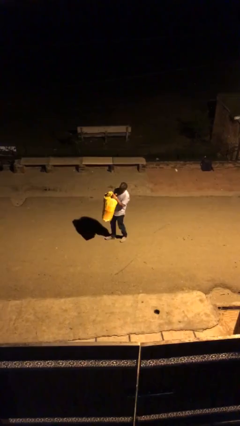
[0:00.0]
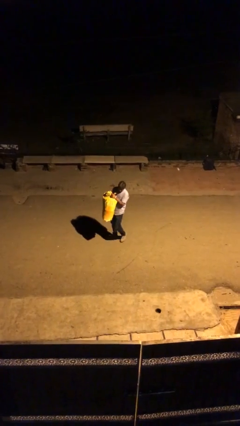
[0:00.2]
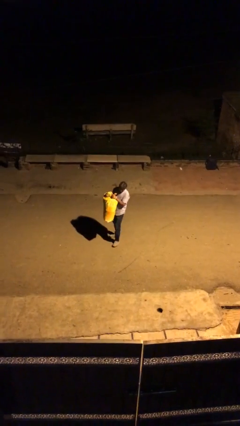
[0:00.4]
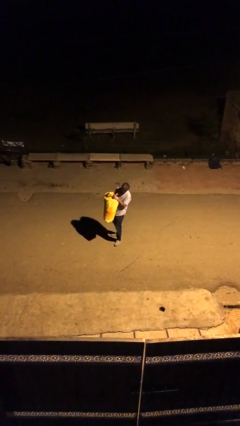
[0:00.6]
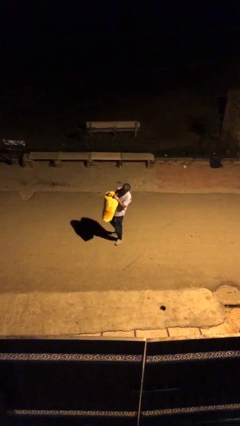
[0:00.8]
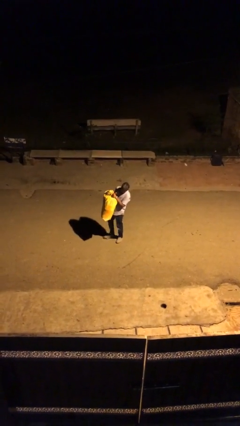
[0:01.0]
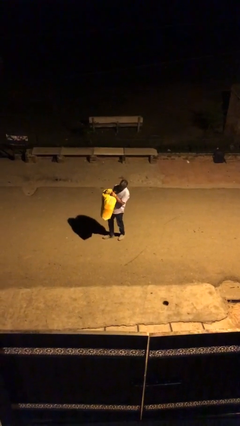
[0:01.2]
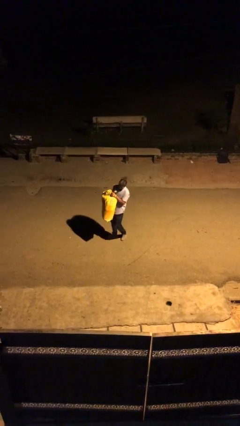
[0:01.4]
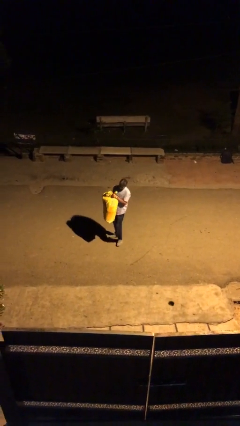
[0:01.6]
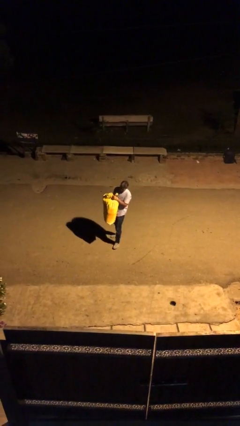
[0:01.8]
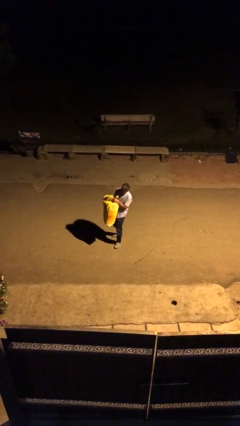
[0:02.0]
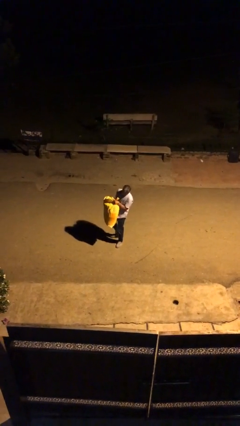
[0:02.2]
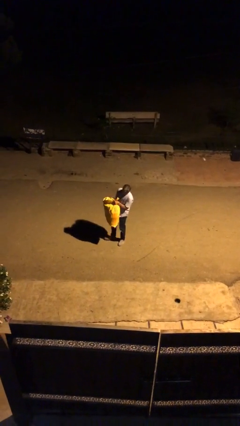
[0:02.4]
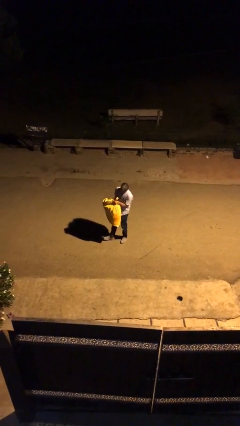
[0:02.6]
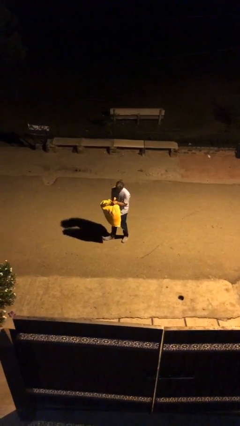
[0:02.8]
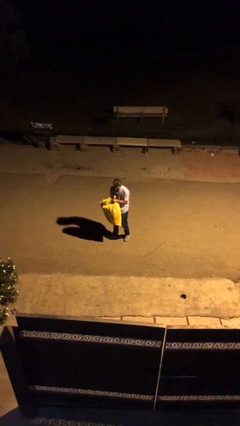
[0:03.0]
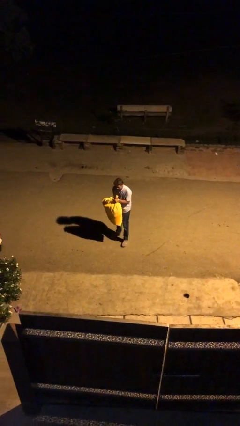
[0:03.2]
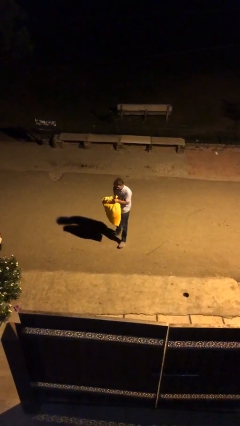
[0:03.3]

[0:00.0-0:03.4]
person carries heavy object

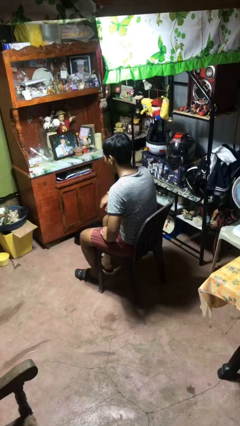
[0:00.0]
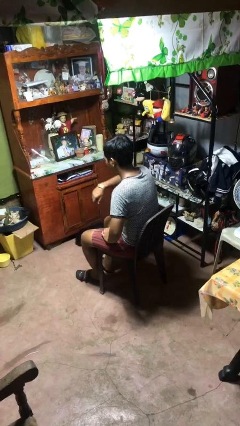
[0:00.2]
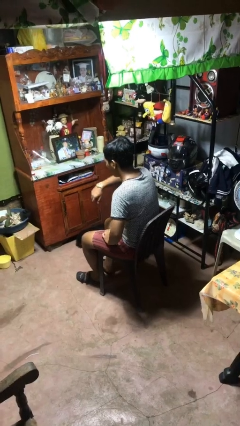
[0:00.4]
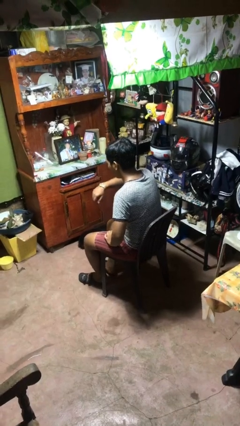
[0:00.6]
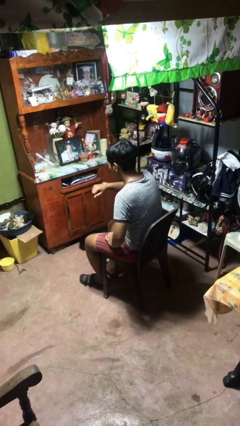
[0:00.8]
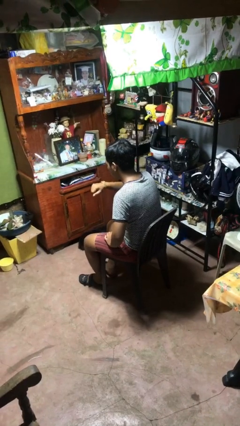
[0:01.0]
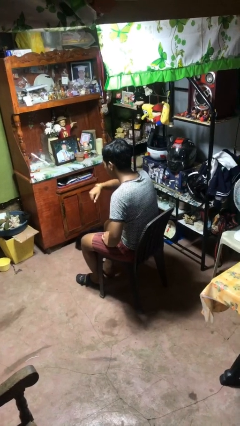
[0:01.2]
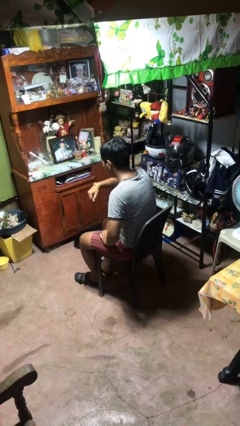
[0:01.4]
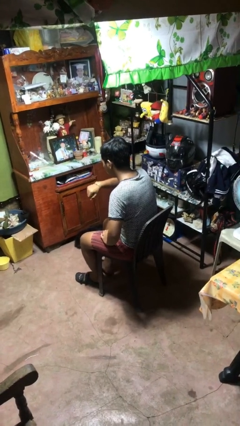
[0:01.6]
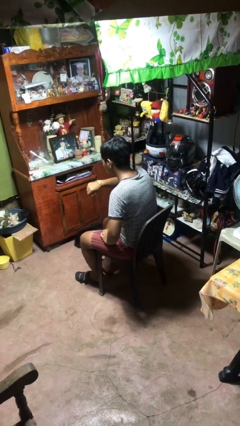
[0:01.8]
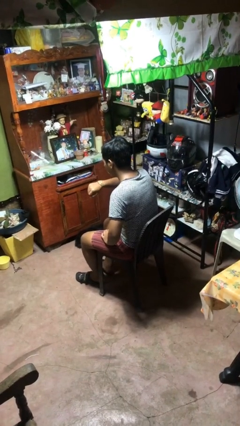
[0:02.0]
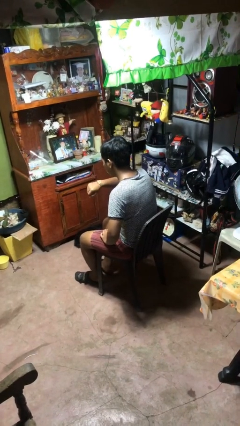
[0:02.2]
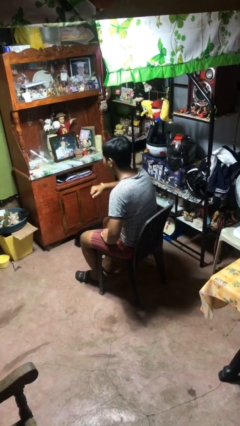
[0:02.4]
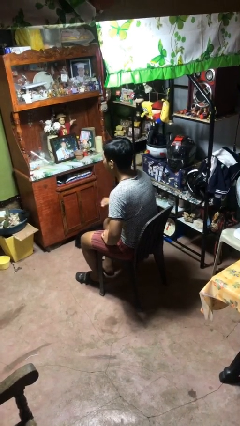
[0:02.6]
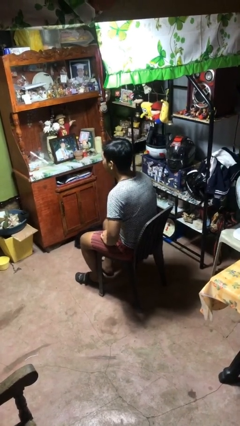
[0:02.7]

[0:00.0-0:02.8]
person looks at wristwatch

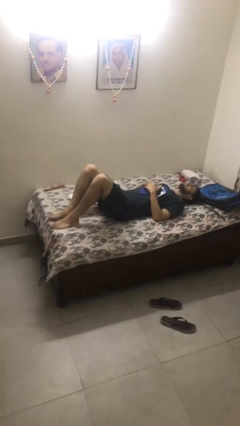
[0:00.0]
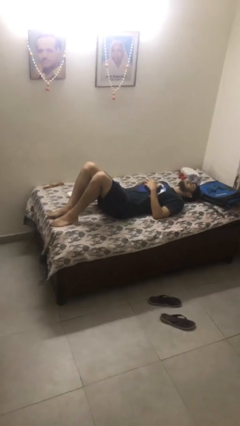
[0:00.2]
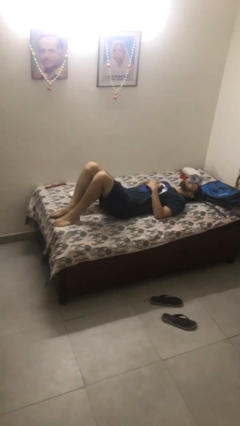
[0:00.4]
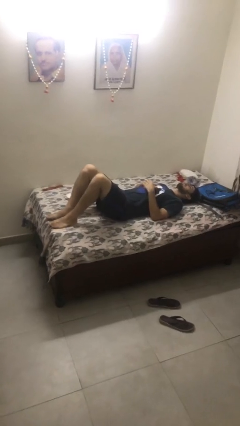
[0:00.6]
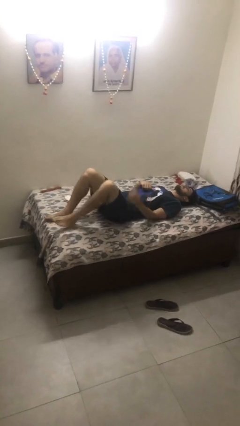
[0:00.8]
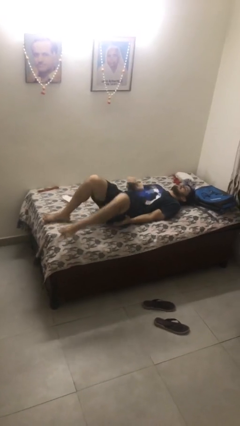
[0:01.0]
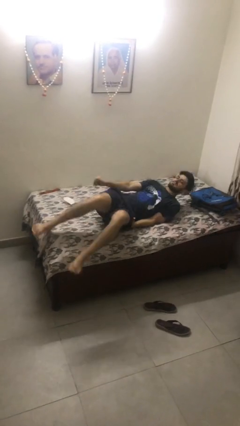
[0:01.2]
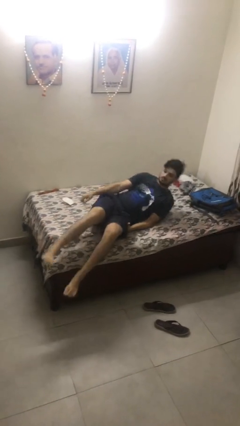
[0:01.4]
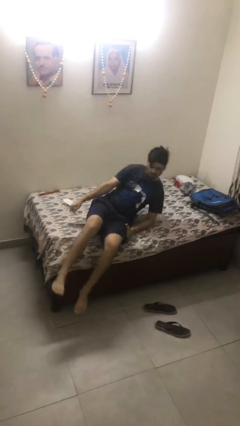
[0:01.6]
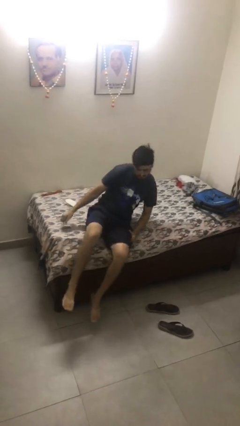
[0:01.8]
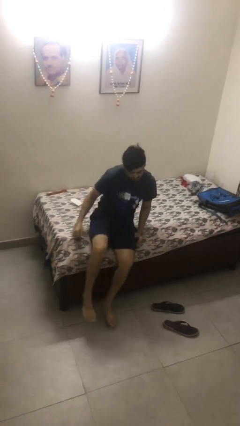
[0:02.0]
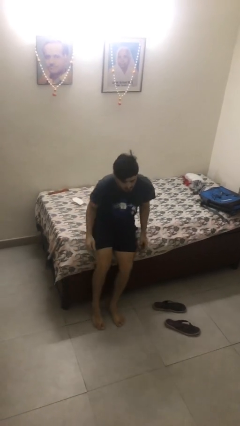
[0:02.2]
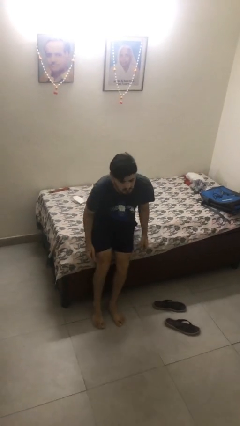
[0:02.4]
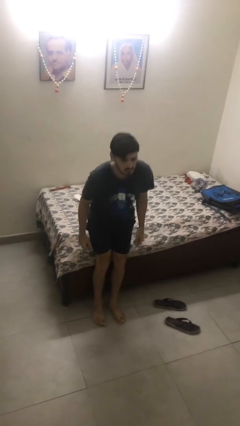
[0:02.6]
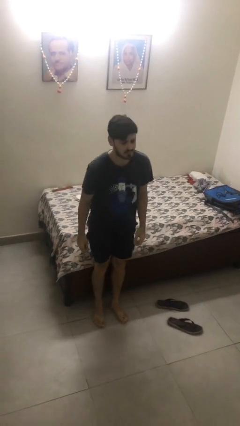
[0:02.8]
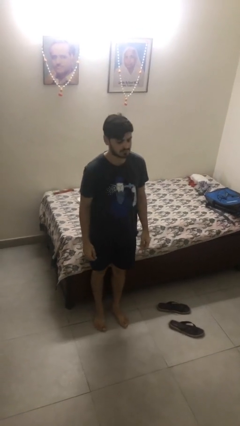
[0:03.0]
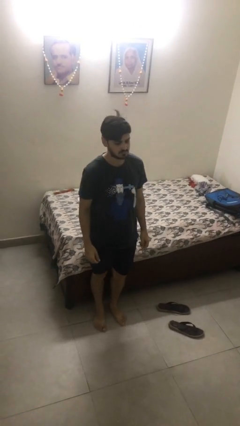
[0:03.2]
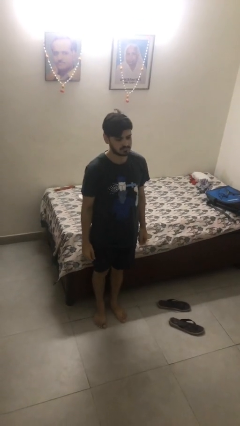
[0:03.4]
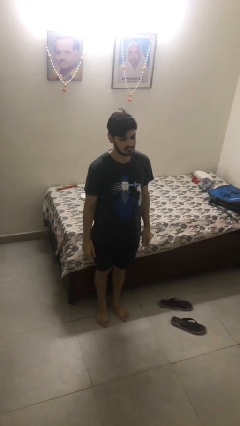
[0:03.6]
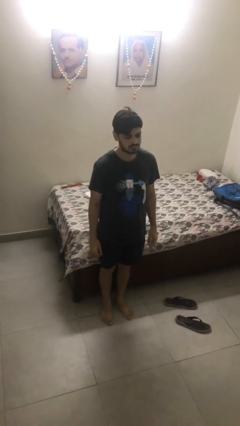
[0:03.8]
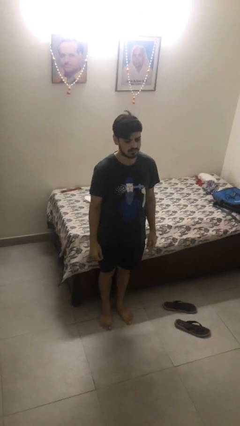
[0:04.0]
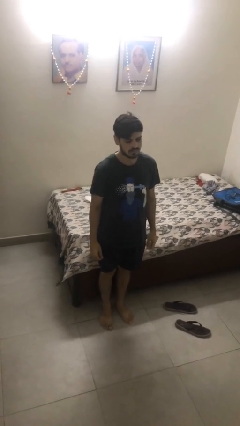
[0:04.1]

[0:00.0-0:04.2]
person stands up

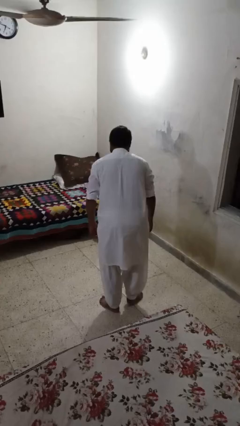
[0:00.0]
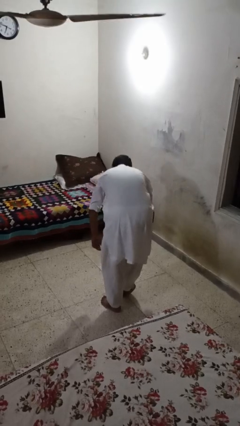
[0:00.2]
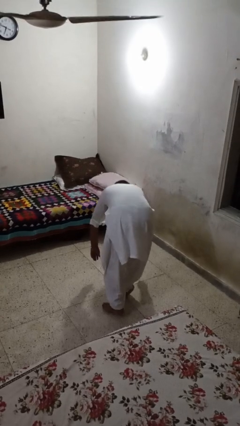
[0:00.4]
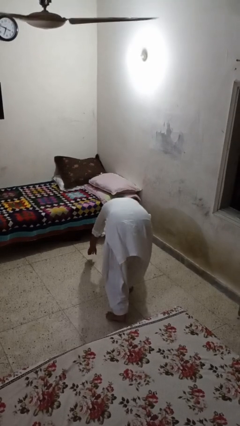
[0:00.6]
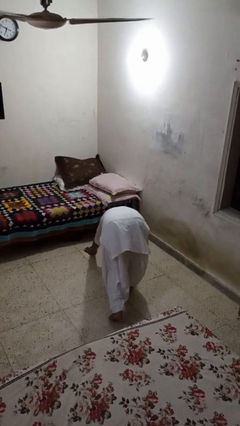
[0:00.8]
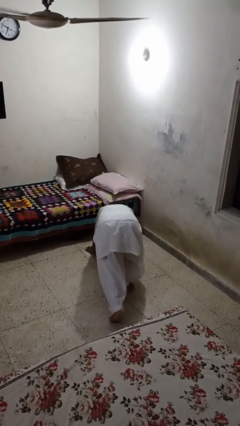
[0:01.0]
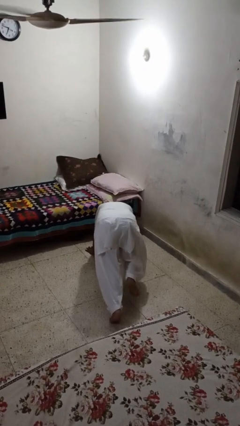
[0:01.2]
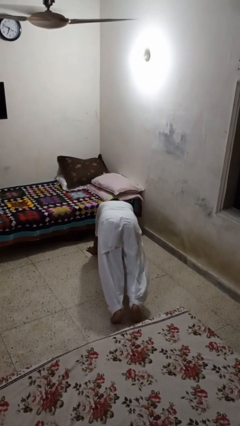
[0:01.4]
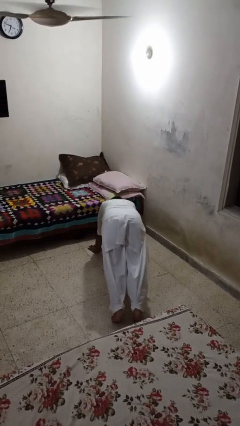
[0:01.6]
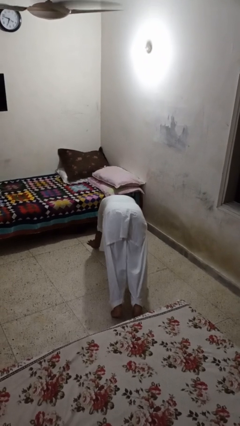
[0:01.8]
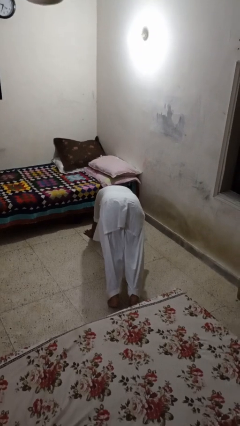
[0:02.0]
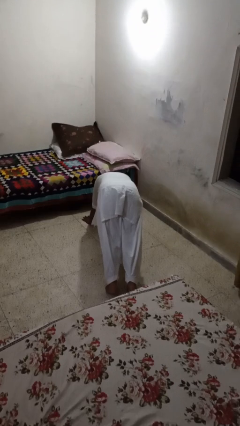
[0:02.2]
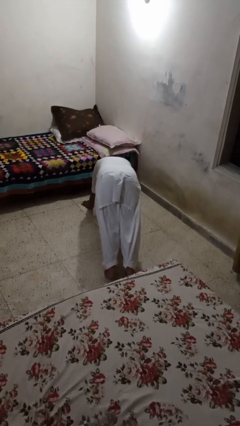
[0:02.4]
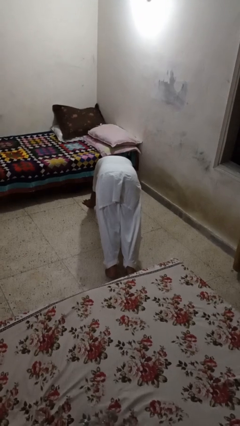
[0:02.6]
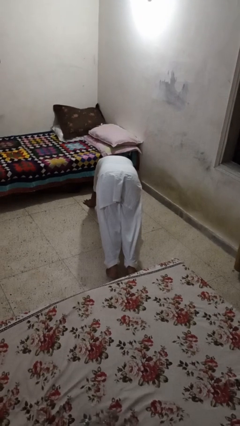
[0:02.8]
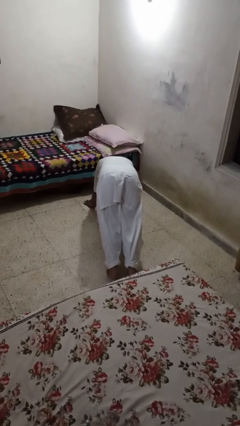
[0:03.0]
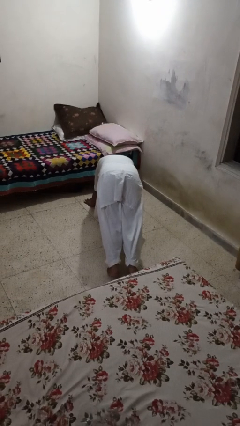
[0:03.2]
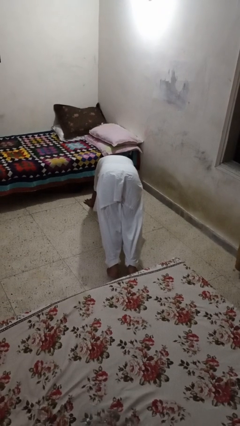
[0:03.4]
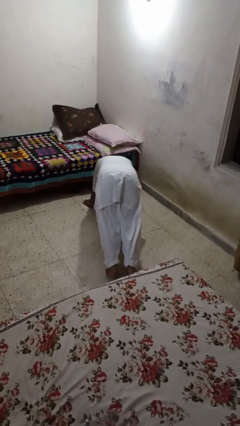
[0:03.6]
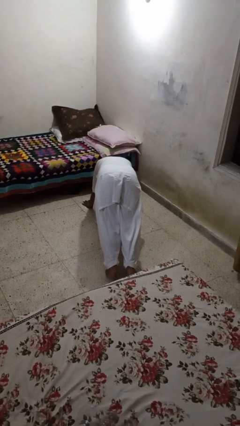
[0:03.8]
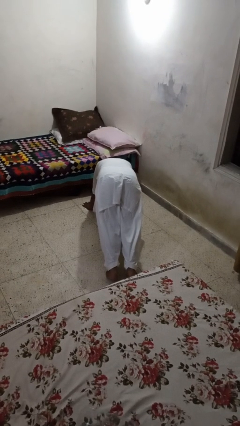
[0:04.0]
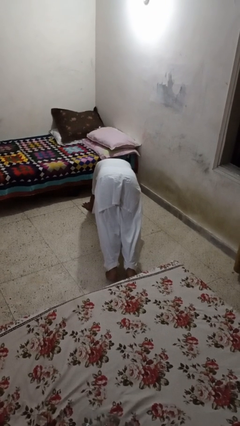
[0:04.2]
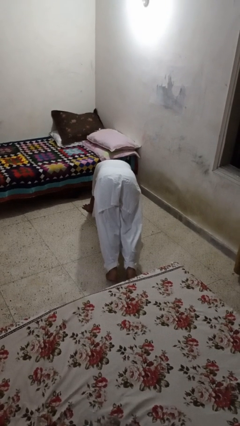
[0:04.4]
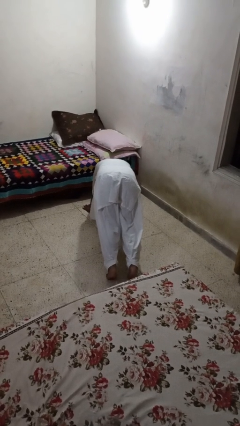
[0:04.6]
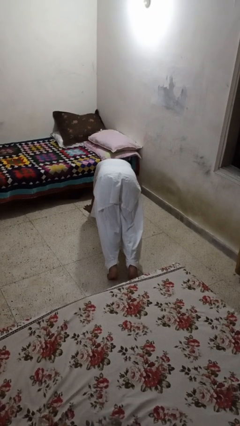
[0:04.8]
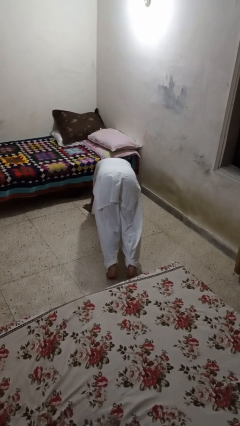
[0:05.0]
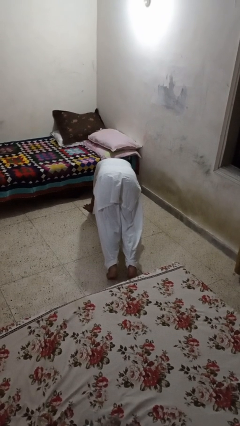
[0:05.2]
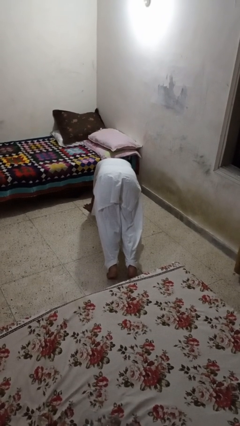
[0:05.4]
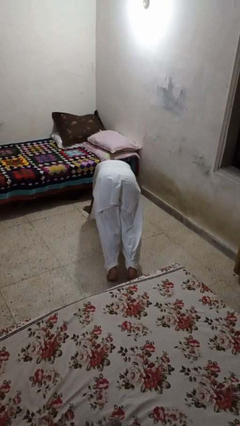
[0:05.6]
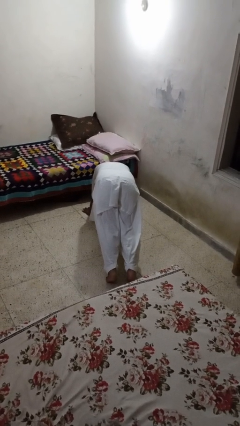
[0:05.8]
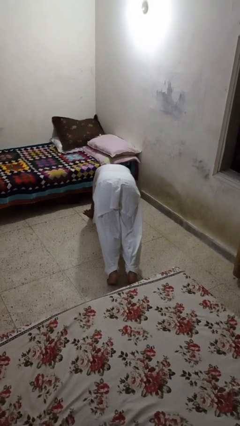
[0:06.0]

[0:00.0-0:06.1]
person exercises with plank

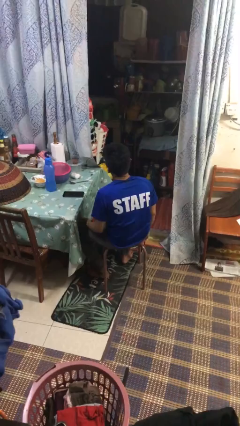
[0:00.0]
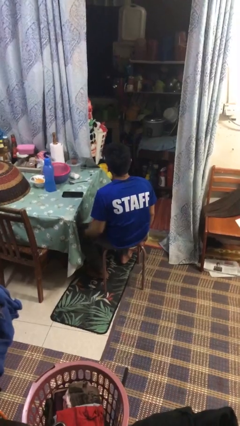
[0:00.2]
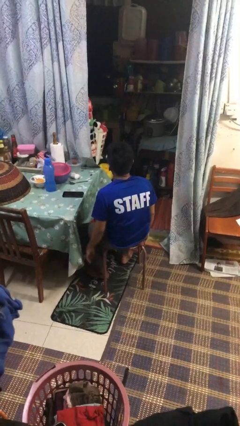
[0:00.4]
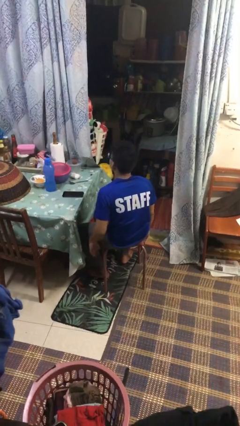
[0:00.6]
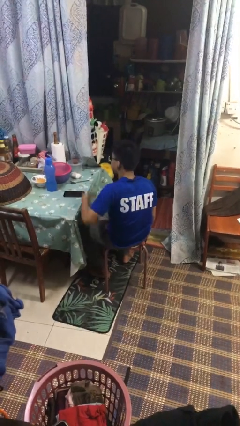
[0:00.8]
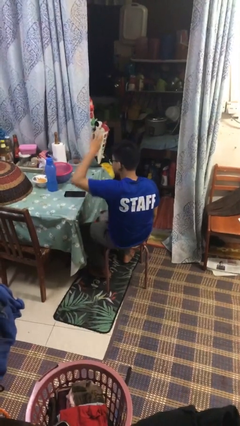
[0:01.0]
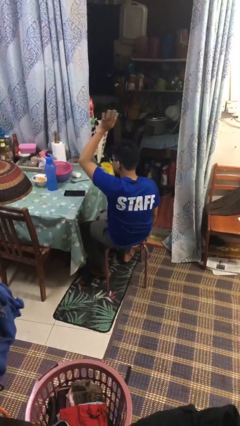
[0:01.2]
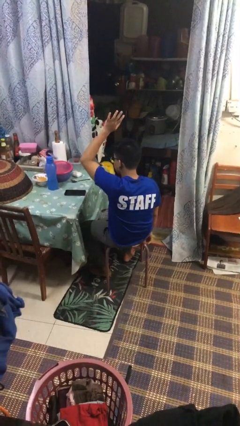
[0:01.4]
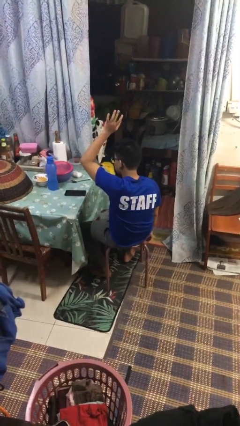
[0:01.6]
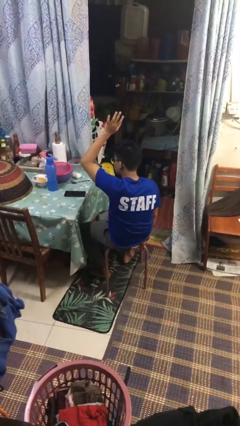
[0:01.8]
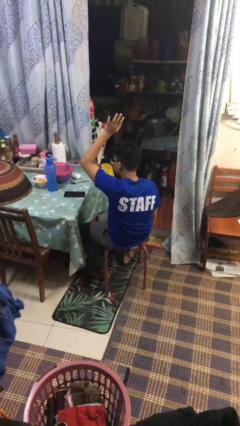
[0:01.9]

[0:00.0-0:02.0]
person gestures raise hand
